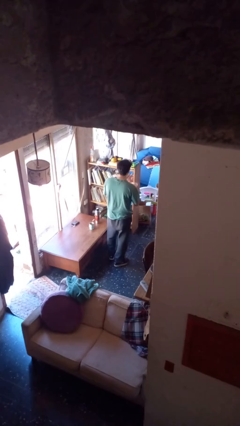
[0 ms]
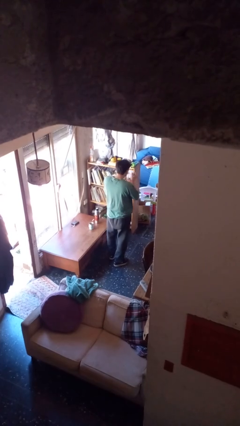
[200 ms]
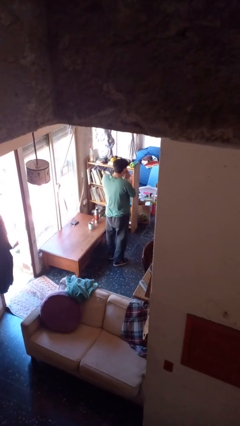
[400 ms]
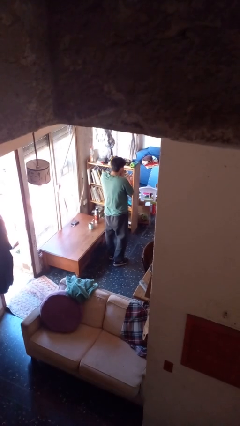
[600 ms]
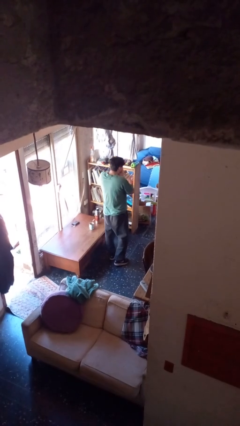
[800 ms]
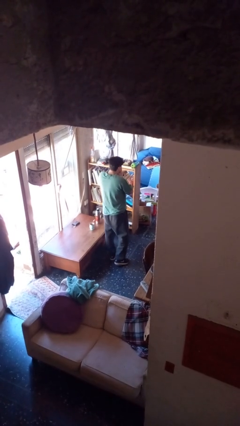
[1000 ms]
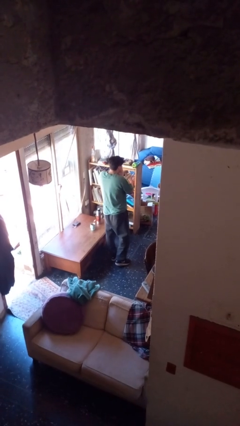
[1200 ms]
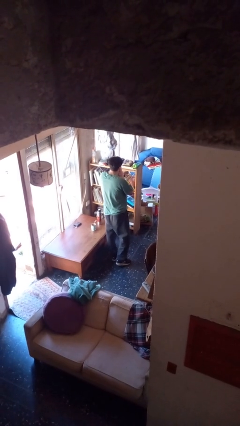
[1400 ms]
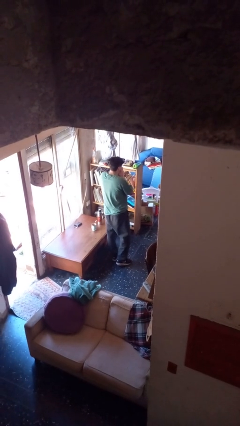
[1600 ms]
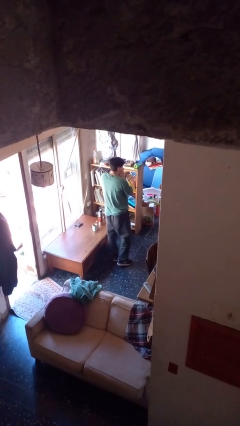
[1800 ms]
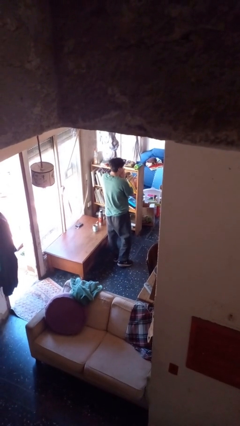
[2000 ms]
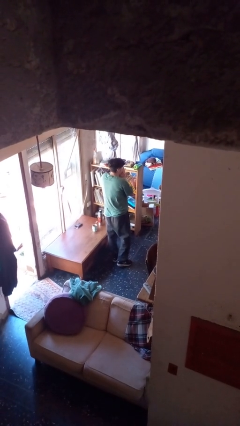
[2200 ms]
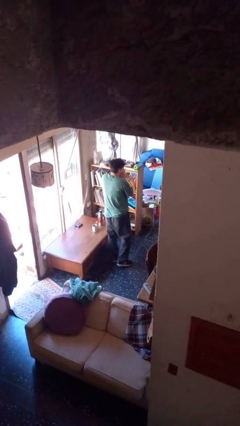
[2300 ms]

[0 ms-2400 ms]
person blows nose

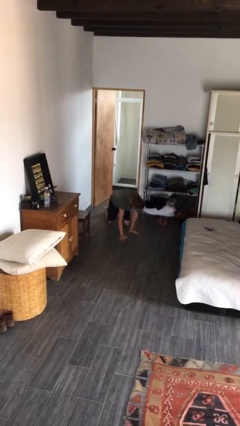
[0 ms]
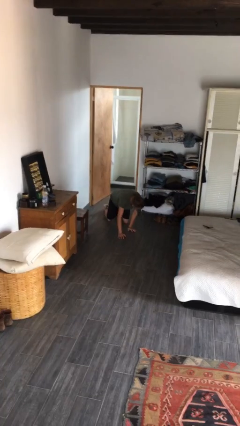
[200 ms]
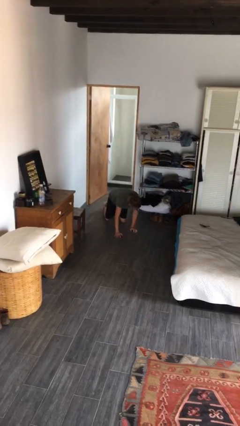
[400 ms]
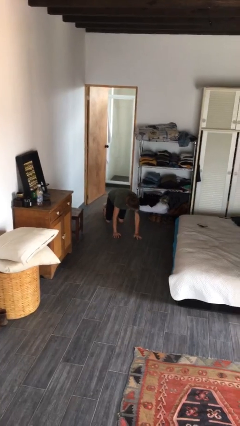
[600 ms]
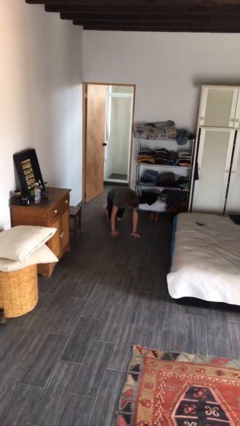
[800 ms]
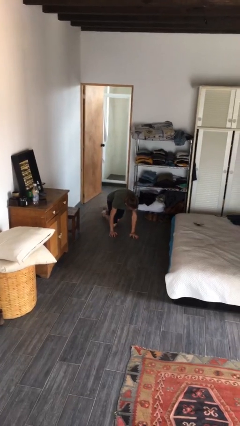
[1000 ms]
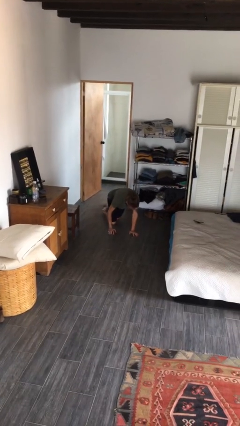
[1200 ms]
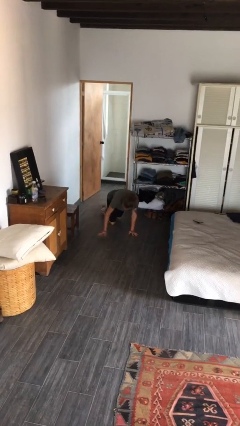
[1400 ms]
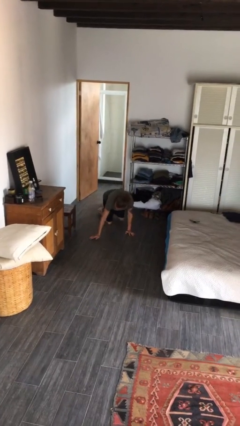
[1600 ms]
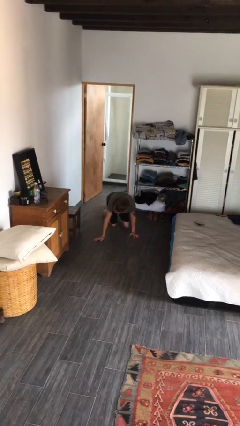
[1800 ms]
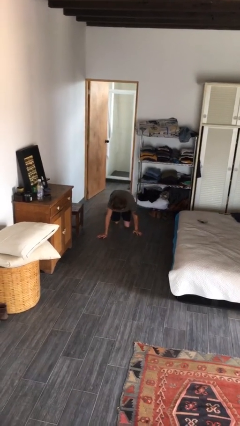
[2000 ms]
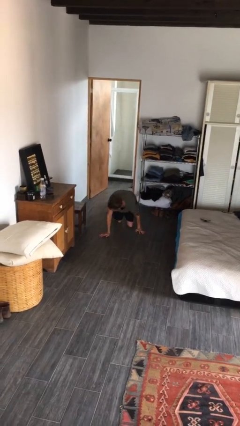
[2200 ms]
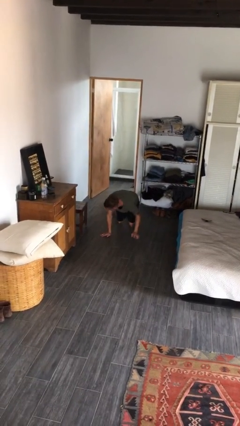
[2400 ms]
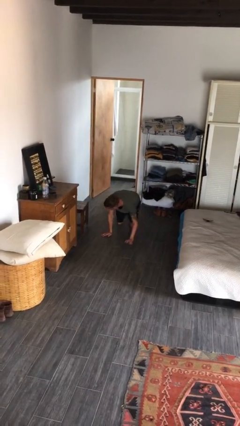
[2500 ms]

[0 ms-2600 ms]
person crawls

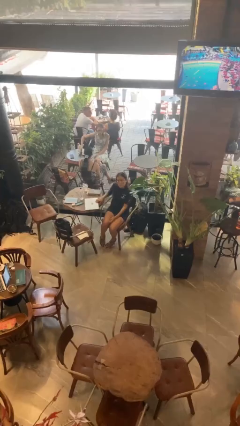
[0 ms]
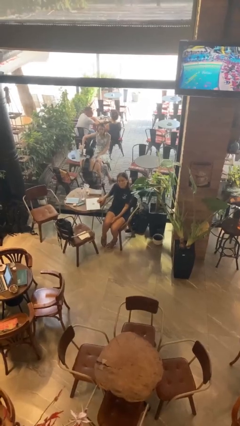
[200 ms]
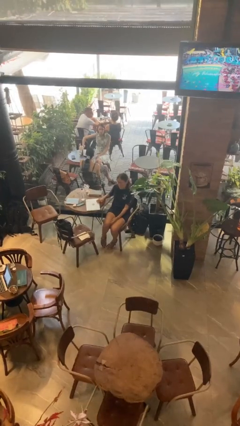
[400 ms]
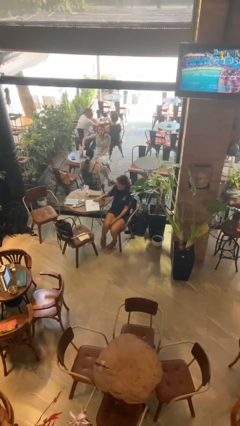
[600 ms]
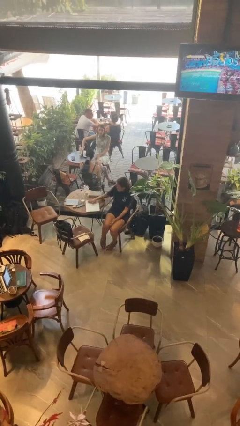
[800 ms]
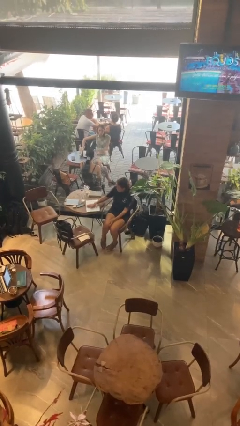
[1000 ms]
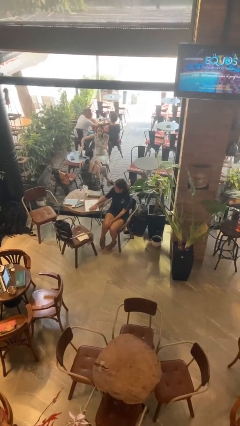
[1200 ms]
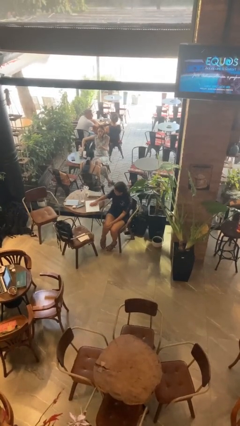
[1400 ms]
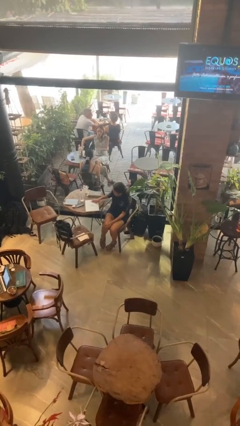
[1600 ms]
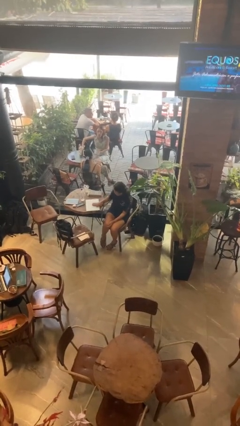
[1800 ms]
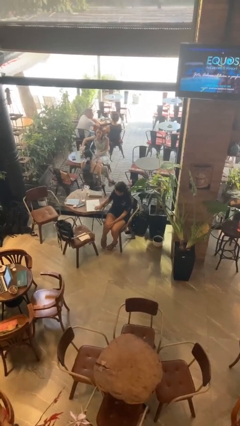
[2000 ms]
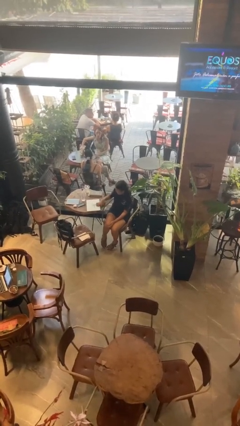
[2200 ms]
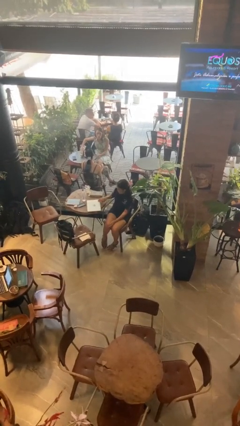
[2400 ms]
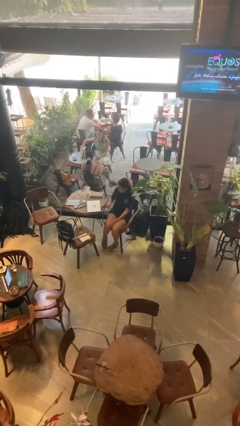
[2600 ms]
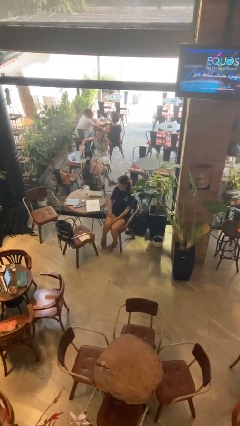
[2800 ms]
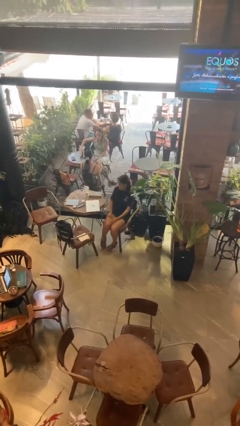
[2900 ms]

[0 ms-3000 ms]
person waves hand over object

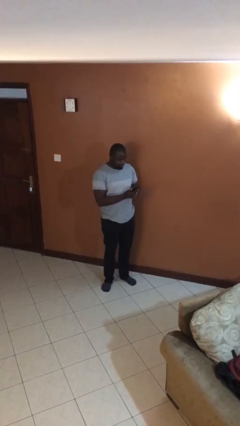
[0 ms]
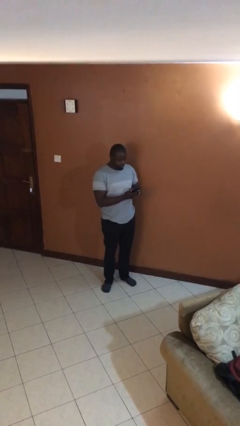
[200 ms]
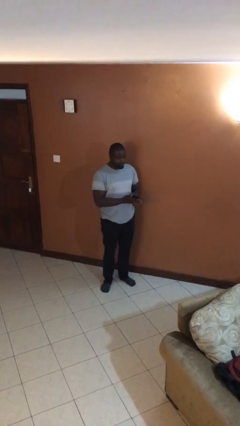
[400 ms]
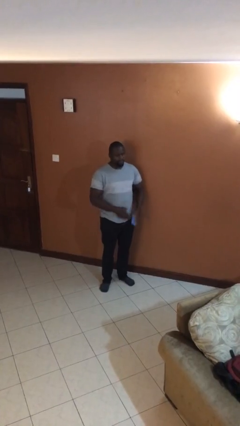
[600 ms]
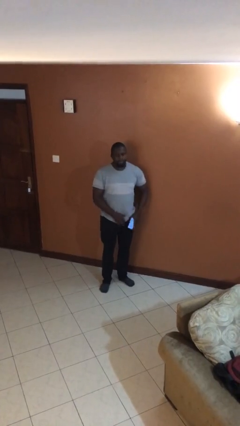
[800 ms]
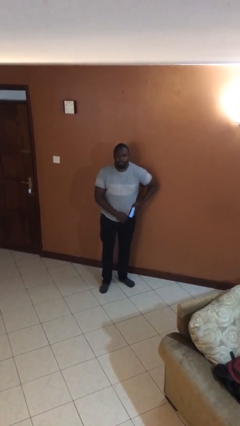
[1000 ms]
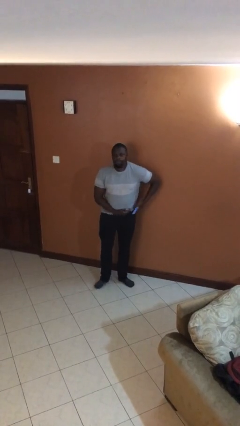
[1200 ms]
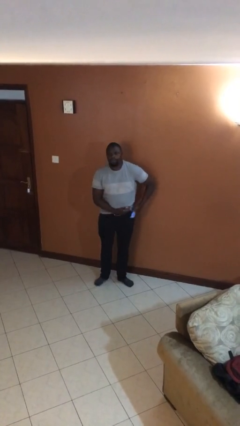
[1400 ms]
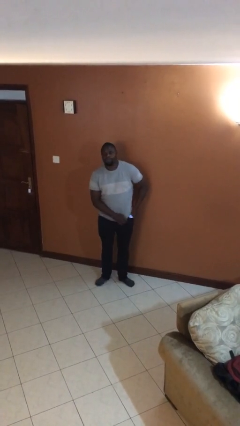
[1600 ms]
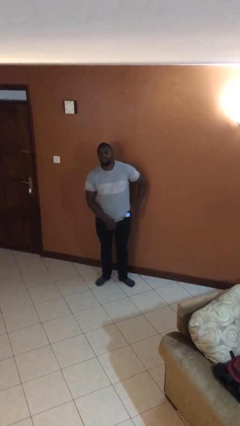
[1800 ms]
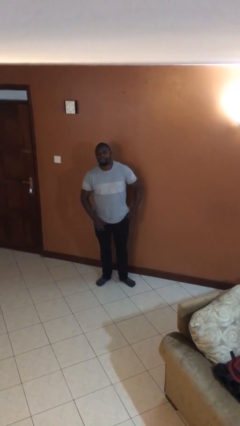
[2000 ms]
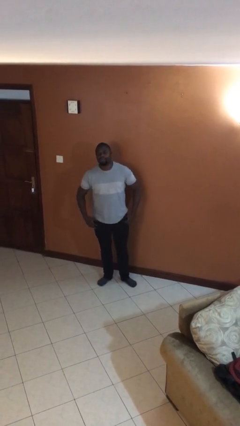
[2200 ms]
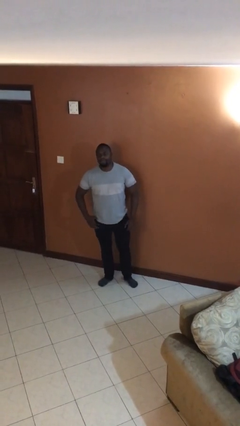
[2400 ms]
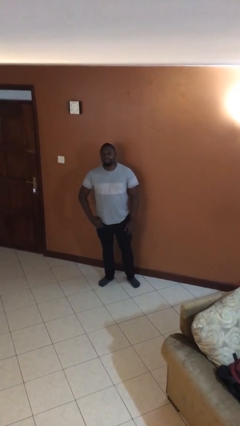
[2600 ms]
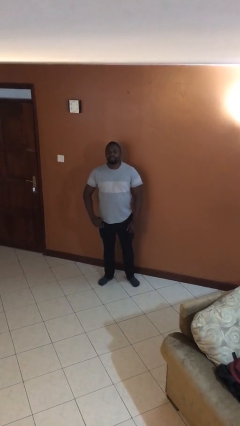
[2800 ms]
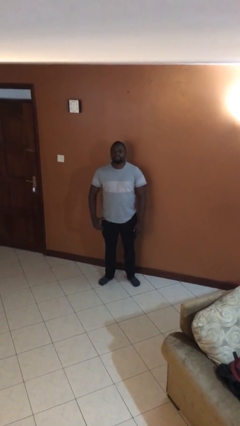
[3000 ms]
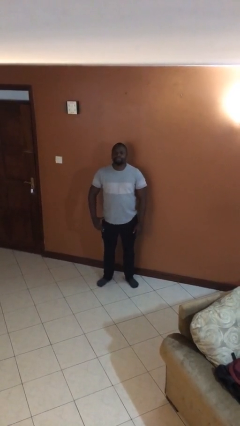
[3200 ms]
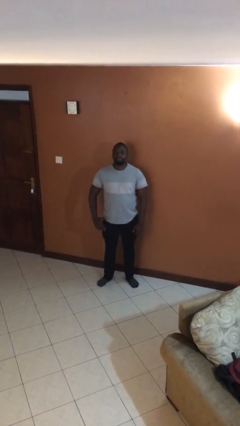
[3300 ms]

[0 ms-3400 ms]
person puts phone into pocket

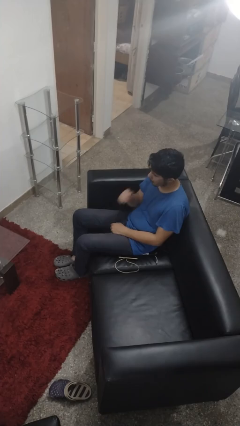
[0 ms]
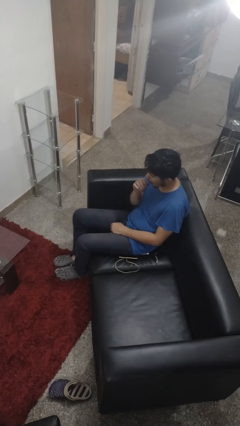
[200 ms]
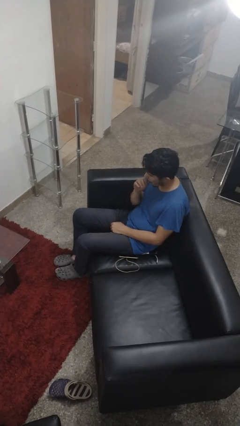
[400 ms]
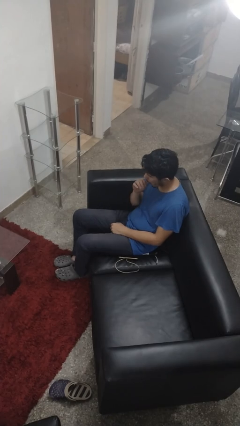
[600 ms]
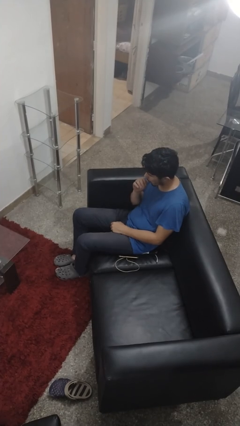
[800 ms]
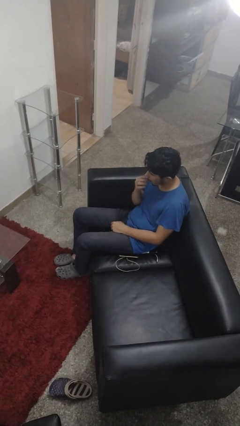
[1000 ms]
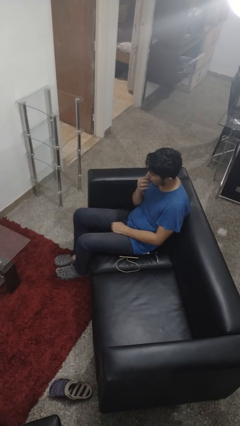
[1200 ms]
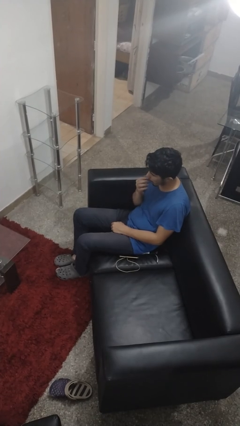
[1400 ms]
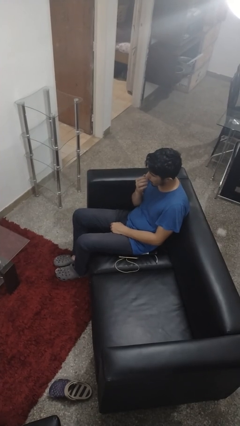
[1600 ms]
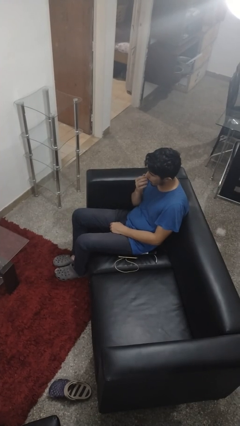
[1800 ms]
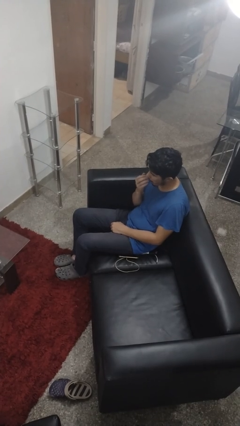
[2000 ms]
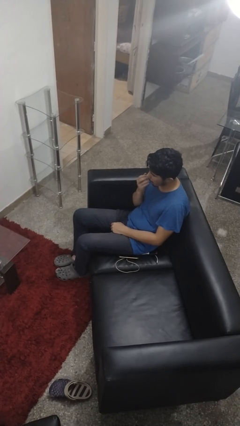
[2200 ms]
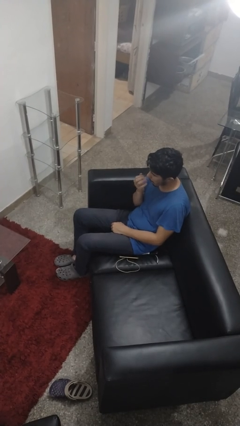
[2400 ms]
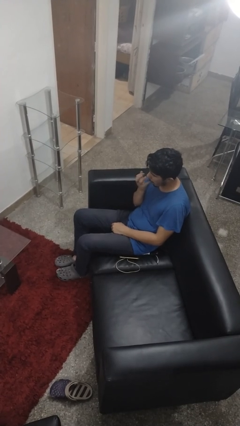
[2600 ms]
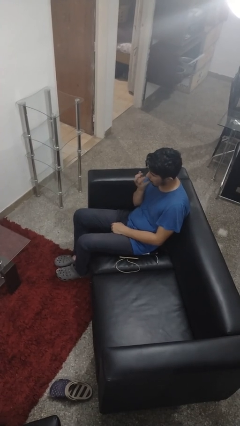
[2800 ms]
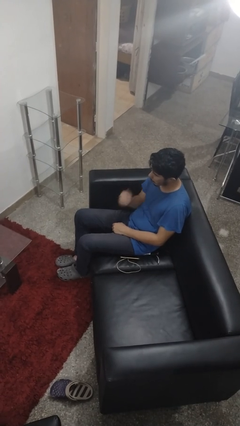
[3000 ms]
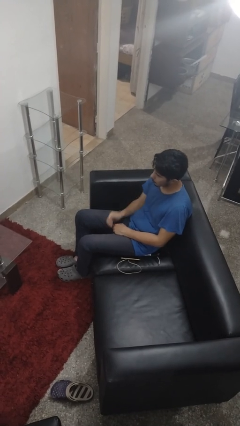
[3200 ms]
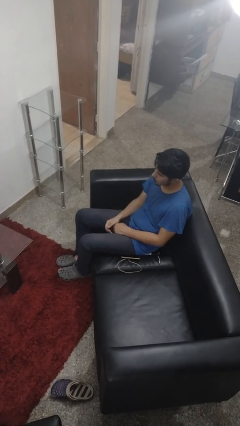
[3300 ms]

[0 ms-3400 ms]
person licks fingers

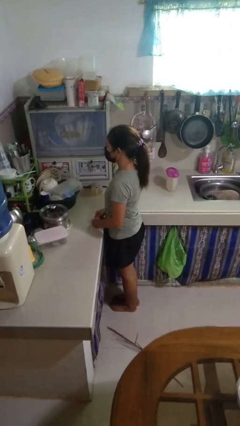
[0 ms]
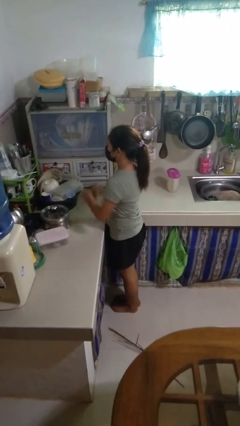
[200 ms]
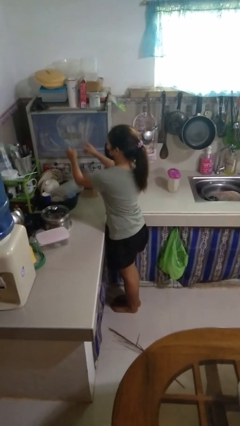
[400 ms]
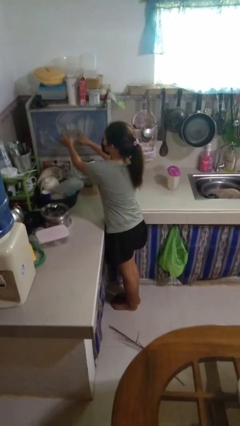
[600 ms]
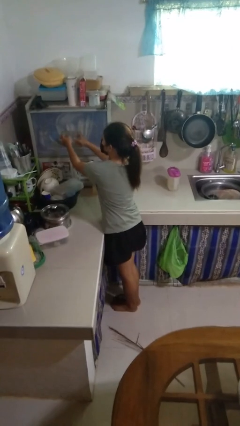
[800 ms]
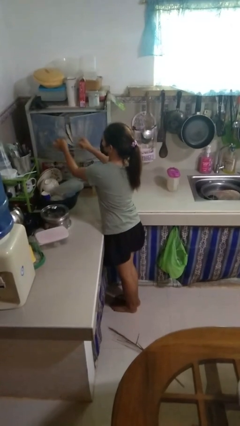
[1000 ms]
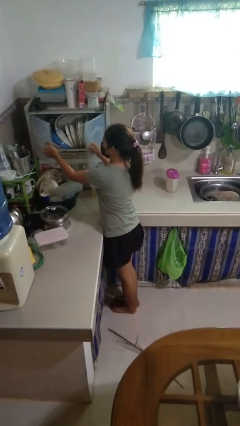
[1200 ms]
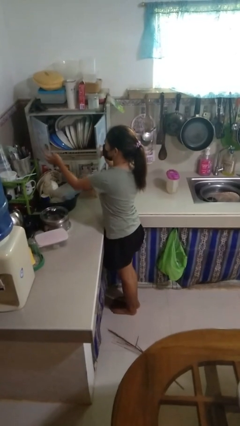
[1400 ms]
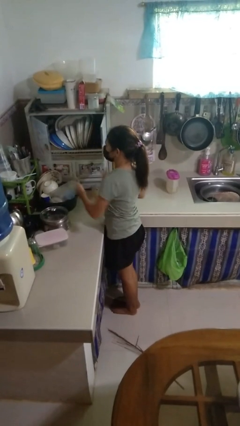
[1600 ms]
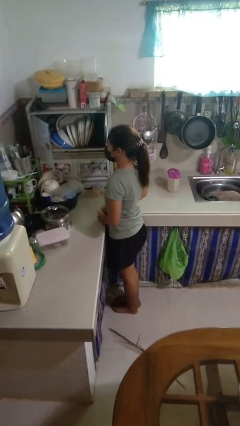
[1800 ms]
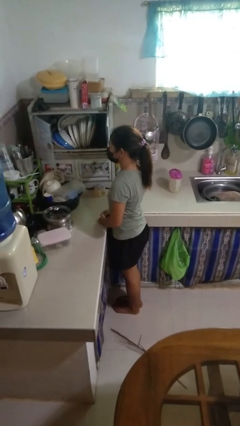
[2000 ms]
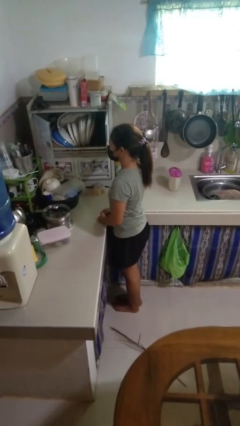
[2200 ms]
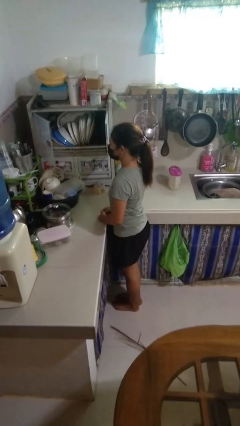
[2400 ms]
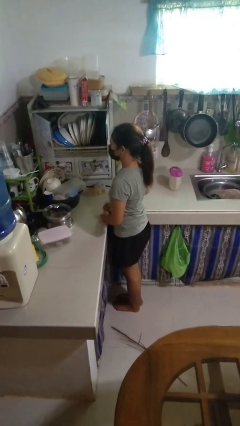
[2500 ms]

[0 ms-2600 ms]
person opens kitchen drawer

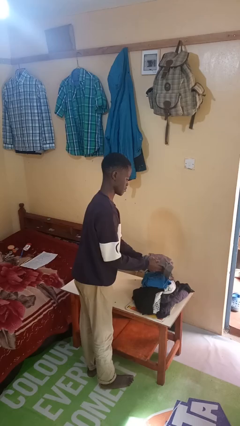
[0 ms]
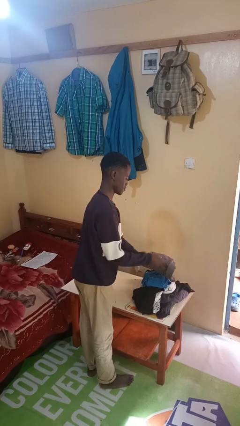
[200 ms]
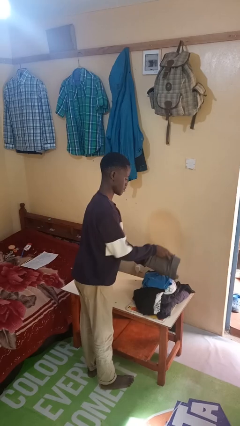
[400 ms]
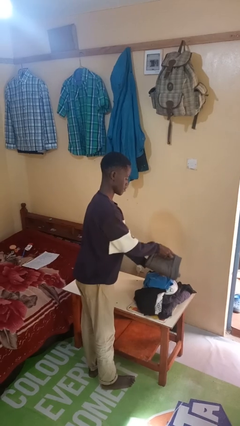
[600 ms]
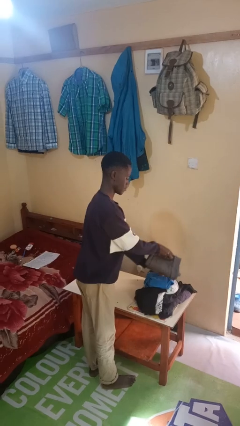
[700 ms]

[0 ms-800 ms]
person folds pants
